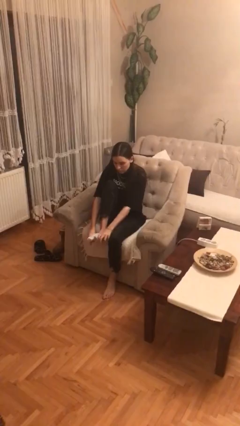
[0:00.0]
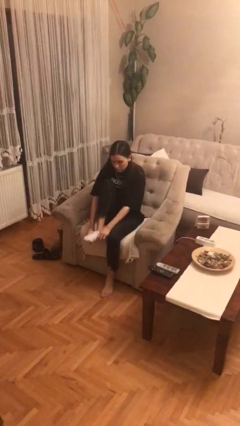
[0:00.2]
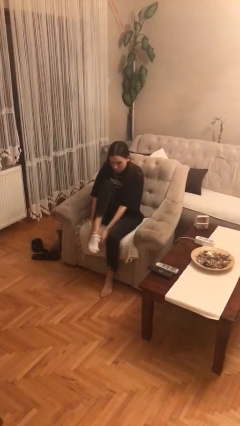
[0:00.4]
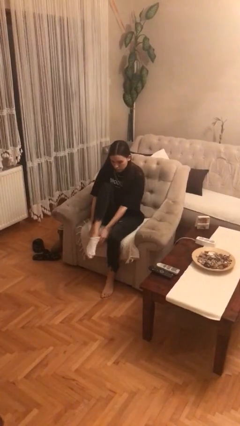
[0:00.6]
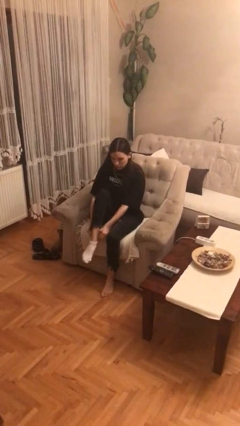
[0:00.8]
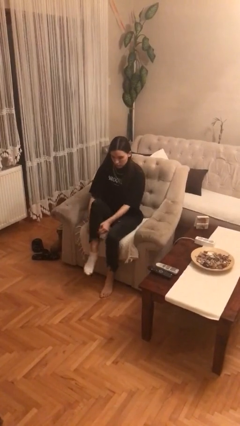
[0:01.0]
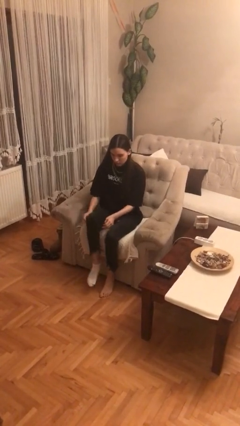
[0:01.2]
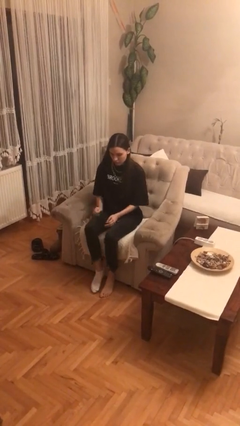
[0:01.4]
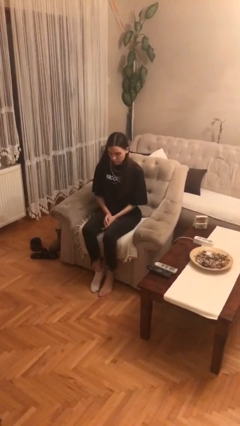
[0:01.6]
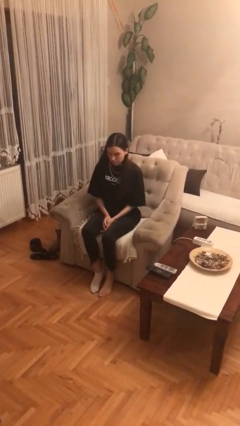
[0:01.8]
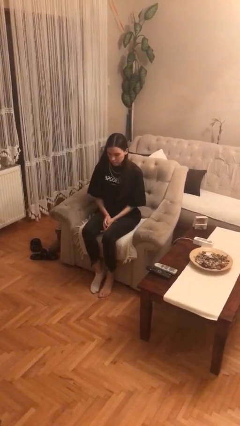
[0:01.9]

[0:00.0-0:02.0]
person puts on socks

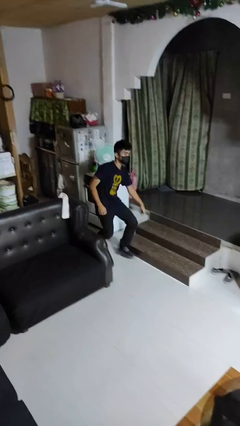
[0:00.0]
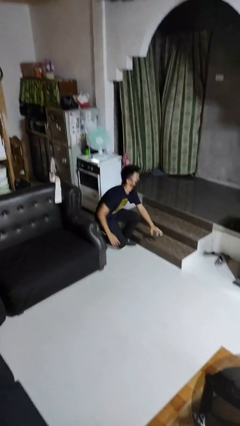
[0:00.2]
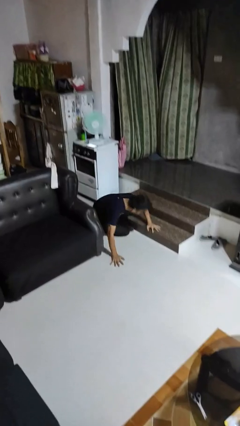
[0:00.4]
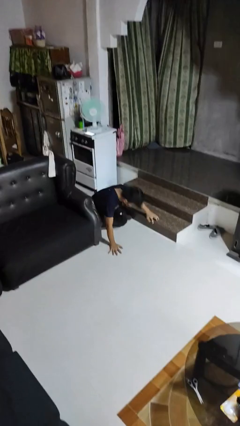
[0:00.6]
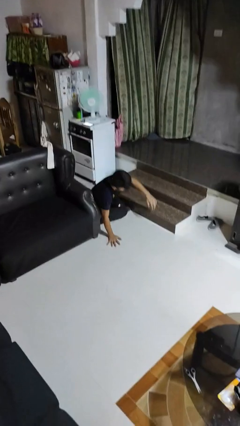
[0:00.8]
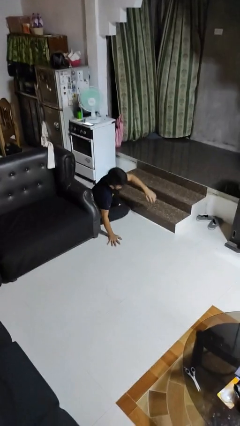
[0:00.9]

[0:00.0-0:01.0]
person trips on object on floor

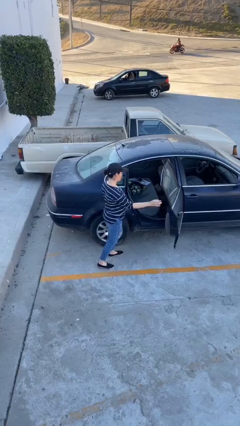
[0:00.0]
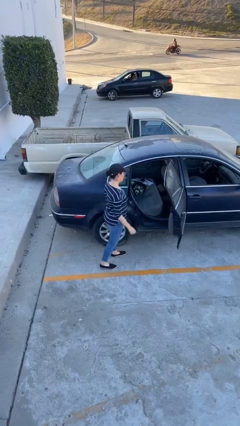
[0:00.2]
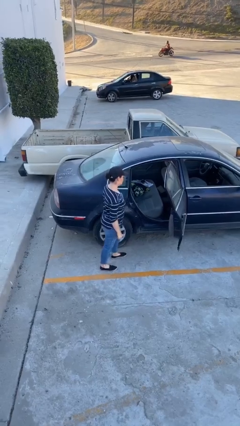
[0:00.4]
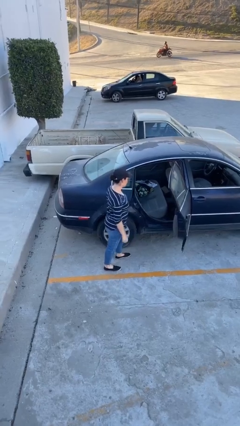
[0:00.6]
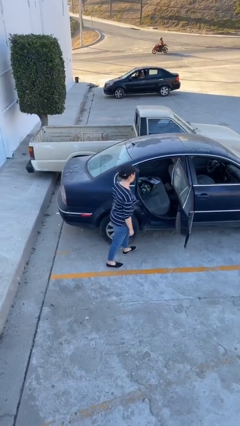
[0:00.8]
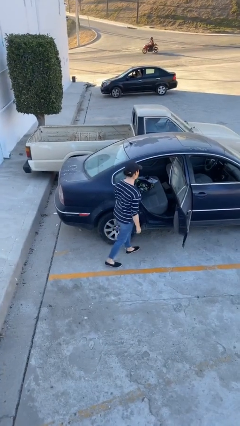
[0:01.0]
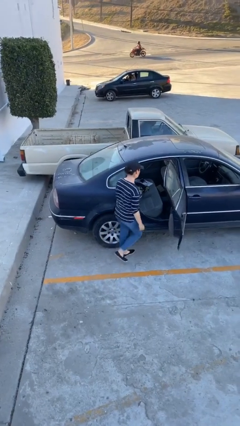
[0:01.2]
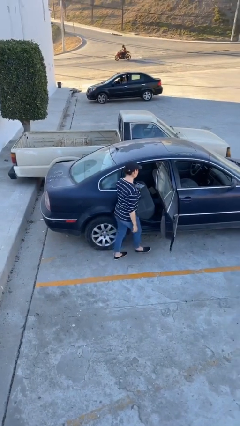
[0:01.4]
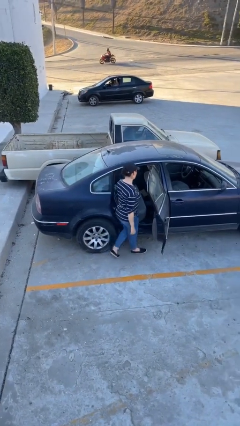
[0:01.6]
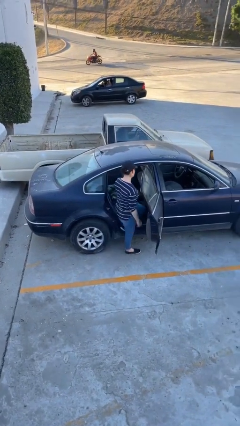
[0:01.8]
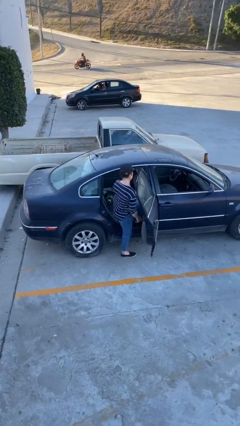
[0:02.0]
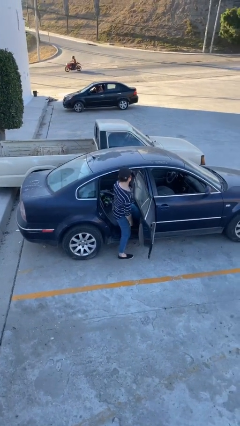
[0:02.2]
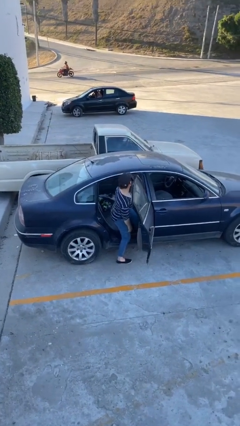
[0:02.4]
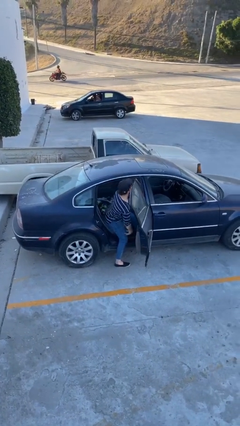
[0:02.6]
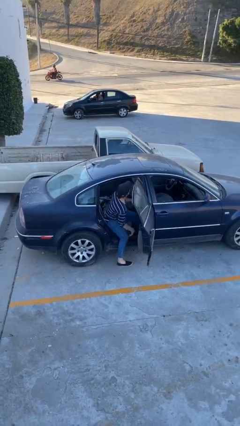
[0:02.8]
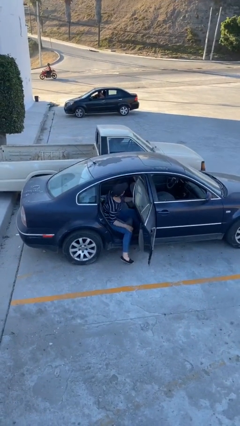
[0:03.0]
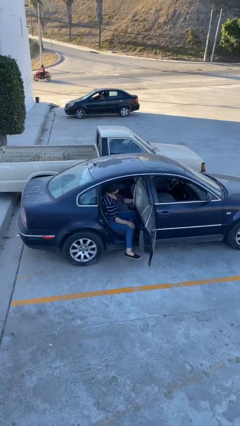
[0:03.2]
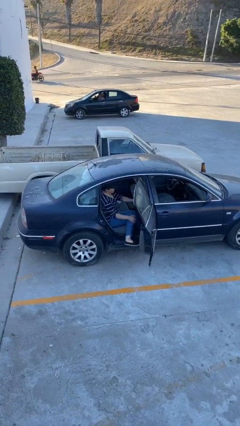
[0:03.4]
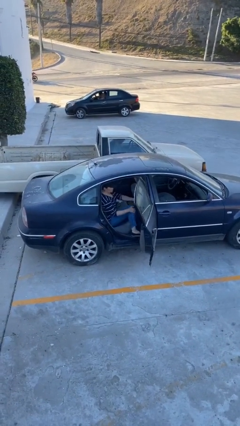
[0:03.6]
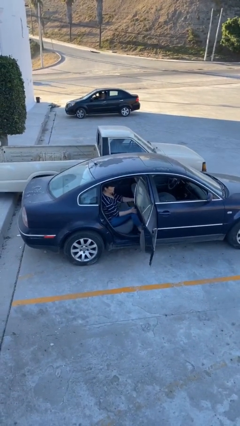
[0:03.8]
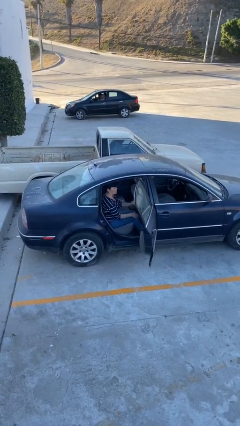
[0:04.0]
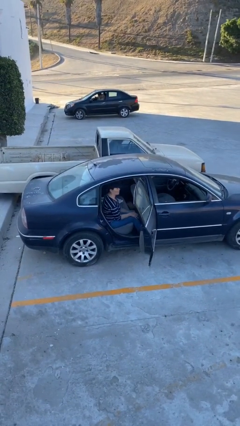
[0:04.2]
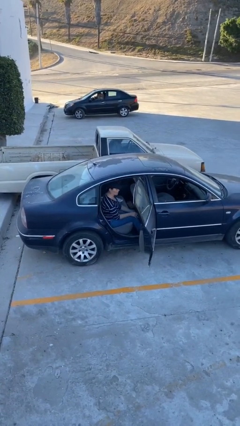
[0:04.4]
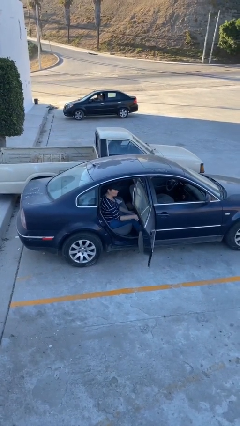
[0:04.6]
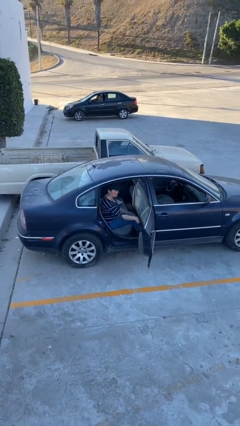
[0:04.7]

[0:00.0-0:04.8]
person enters car

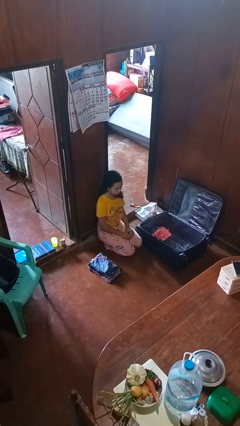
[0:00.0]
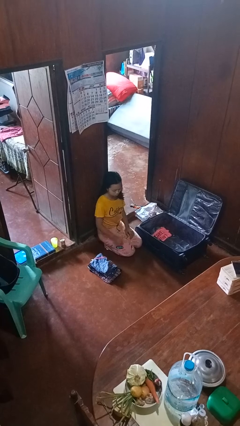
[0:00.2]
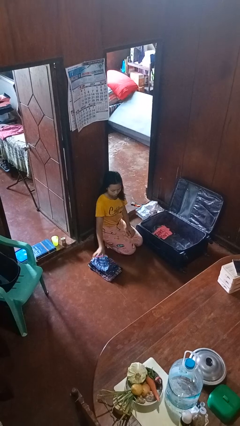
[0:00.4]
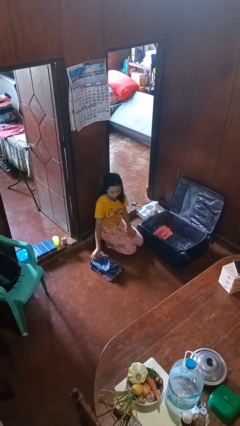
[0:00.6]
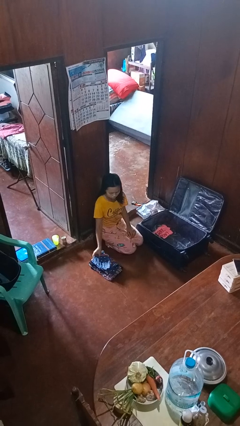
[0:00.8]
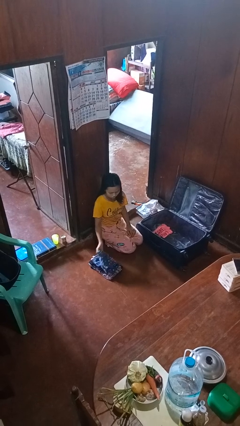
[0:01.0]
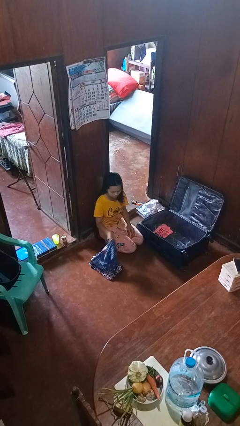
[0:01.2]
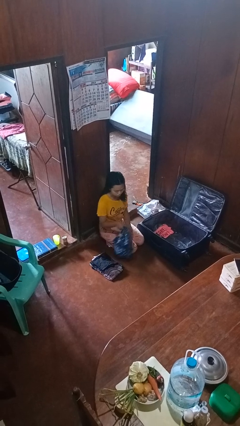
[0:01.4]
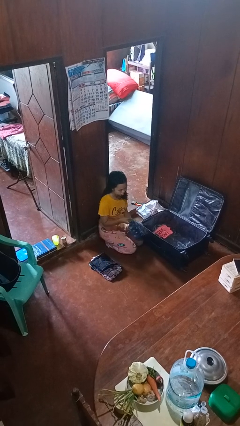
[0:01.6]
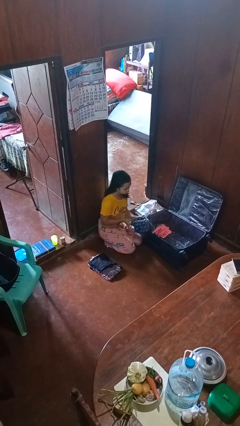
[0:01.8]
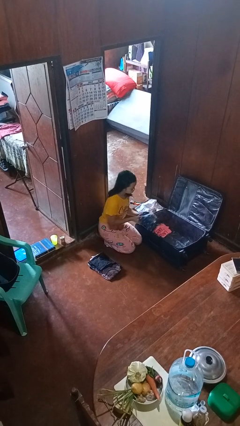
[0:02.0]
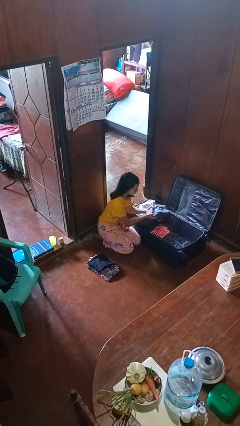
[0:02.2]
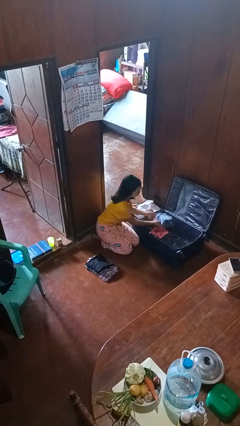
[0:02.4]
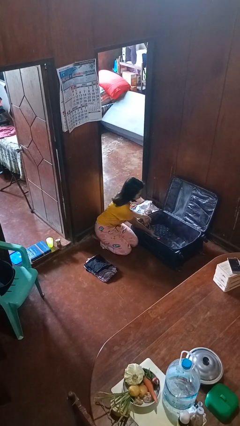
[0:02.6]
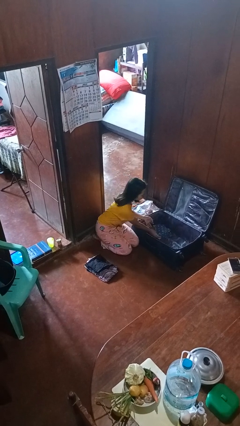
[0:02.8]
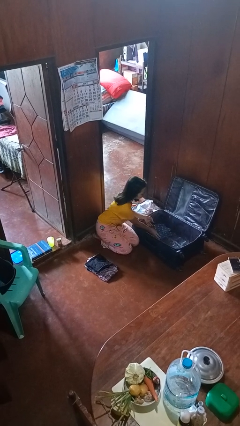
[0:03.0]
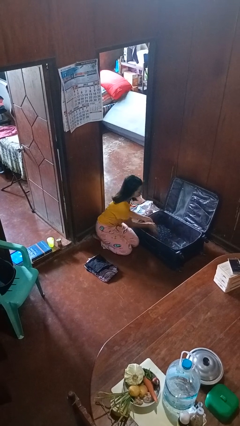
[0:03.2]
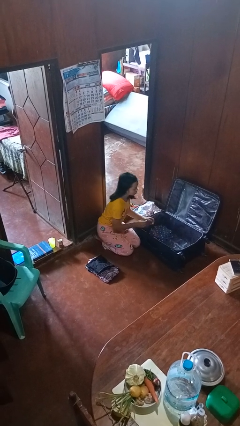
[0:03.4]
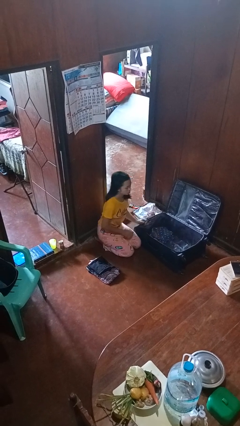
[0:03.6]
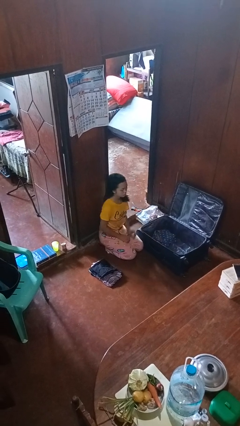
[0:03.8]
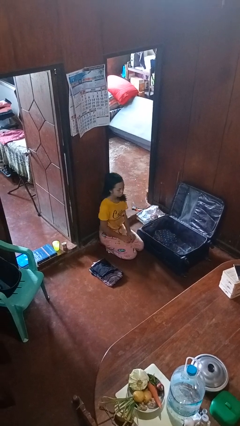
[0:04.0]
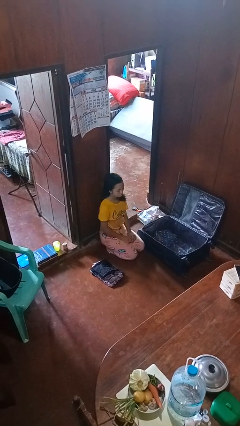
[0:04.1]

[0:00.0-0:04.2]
person loads clothes into suitcase

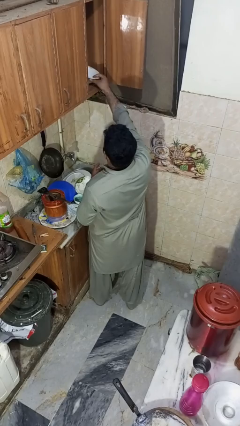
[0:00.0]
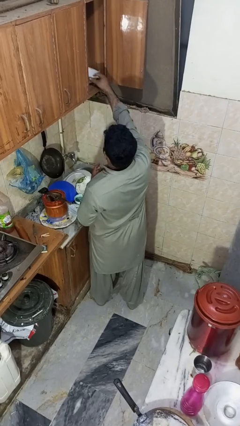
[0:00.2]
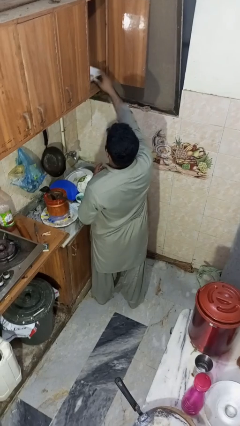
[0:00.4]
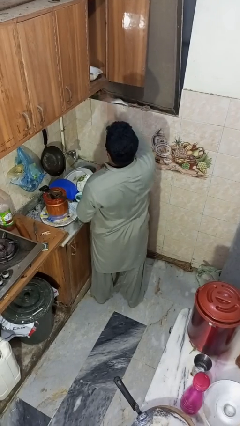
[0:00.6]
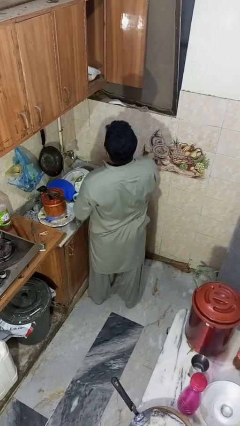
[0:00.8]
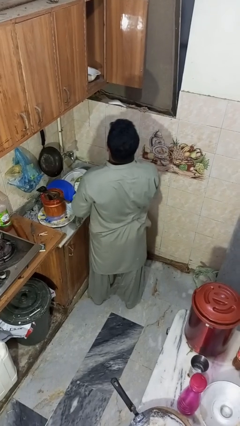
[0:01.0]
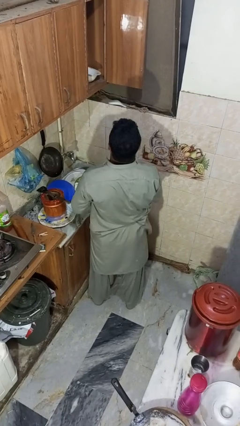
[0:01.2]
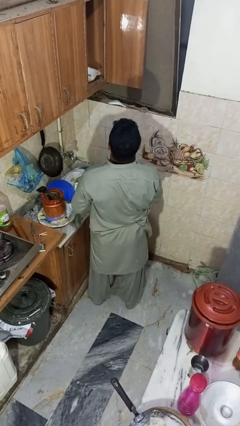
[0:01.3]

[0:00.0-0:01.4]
person puts object in cabinet

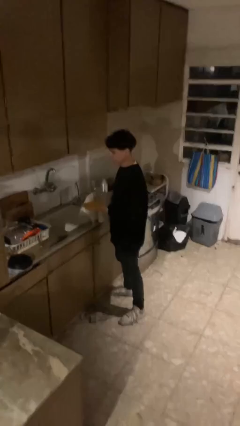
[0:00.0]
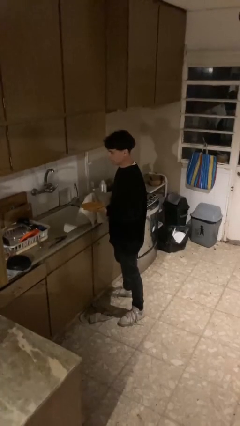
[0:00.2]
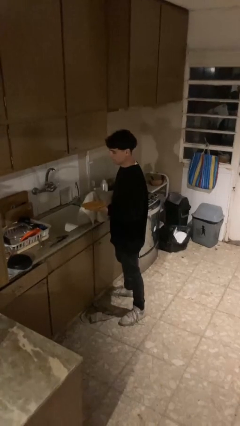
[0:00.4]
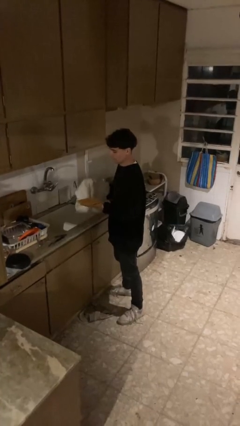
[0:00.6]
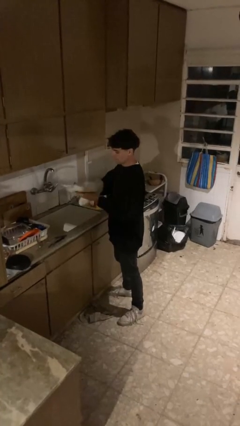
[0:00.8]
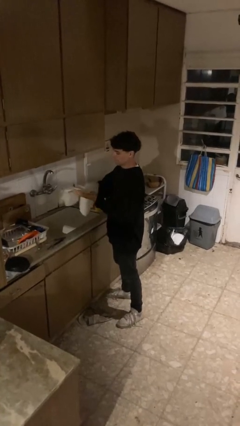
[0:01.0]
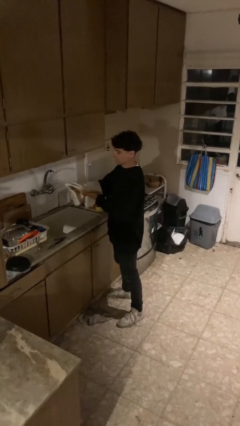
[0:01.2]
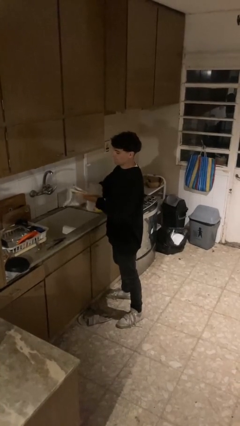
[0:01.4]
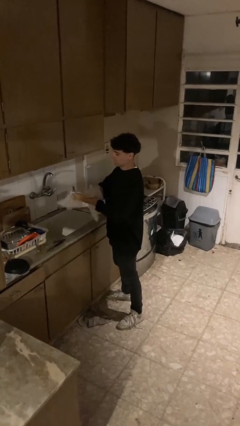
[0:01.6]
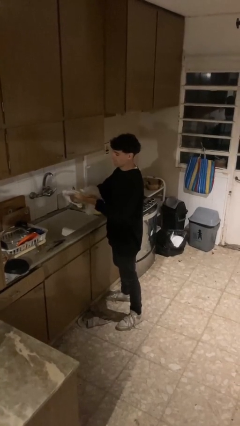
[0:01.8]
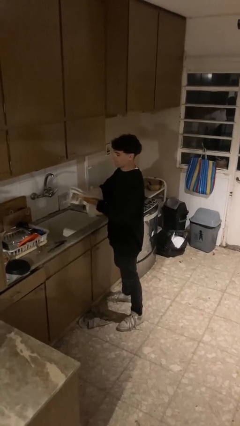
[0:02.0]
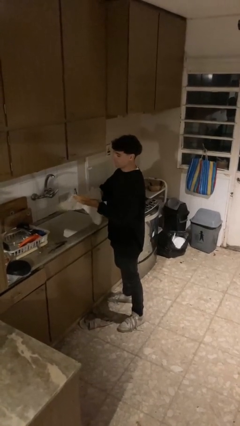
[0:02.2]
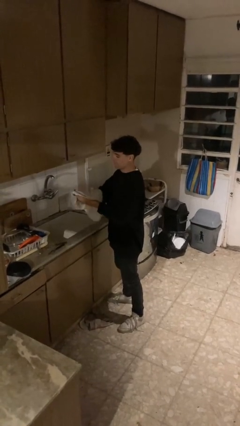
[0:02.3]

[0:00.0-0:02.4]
person dries dish

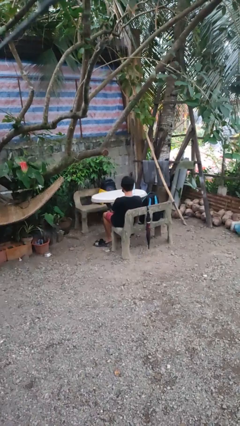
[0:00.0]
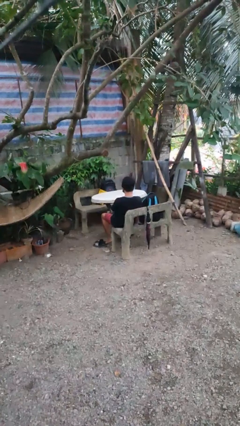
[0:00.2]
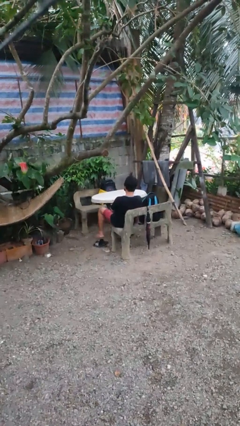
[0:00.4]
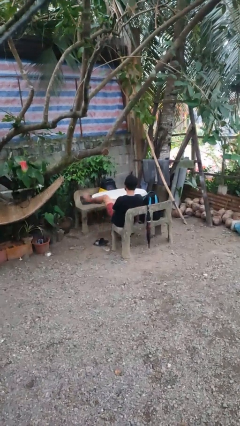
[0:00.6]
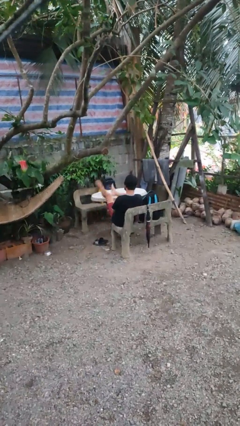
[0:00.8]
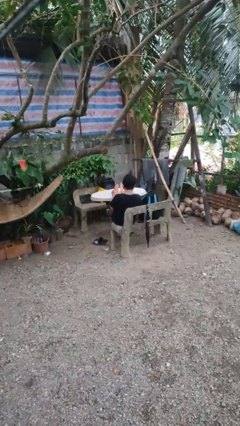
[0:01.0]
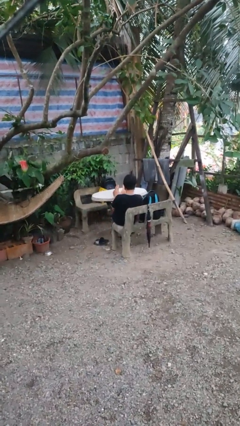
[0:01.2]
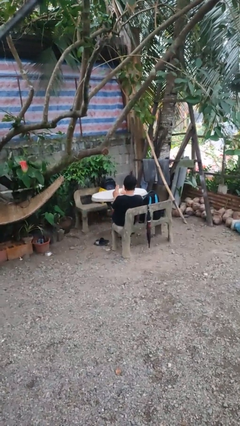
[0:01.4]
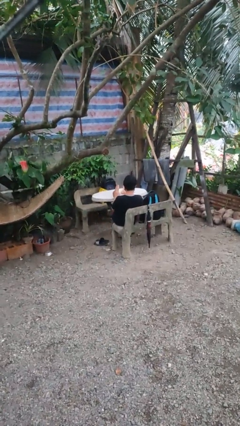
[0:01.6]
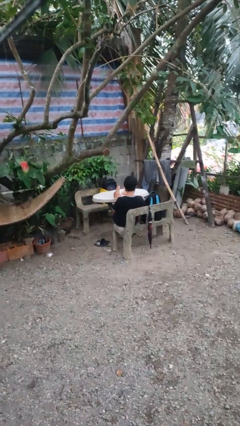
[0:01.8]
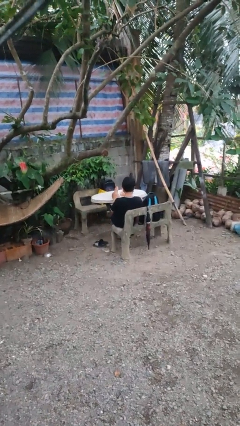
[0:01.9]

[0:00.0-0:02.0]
person puts feet up
